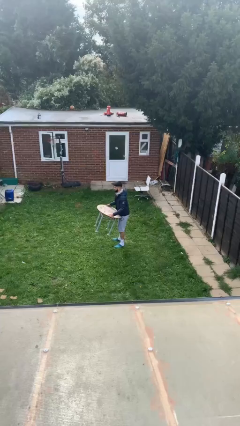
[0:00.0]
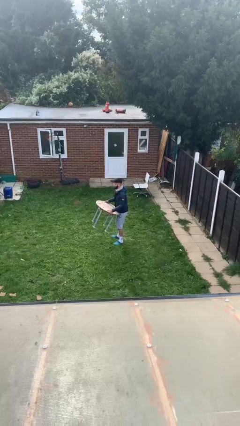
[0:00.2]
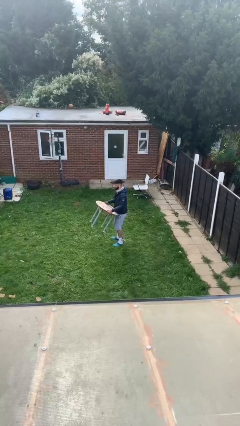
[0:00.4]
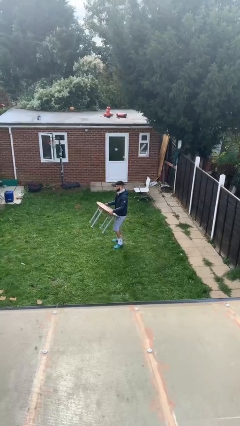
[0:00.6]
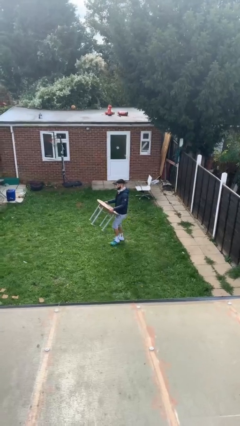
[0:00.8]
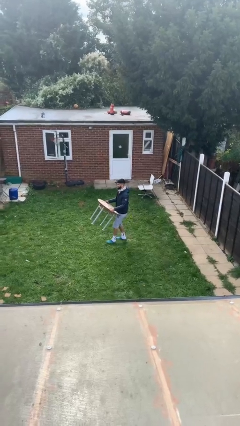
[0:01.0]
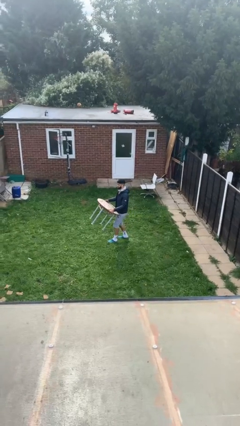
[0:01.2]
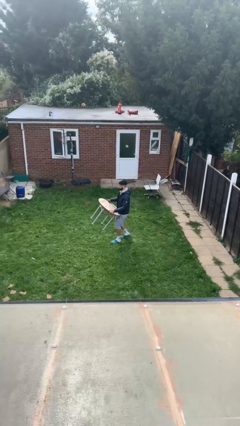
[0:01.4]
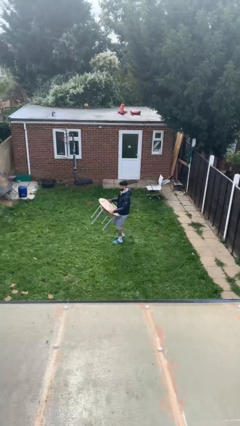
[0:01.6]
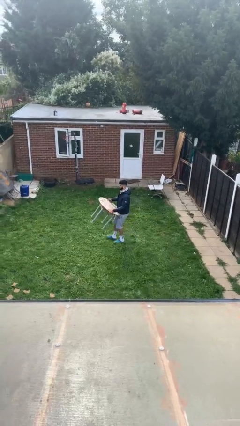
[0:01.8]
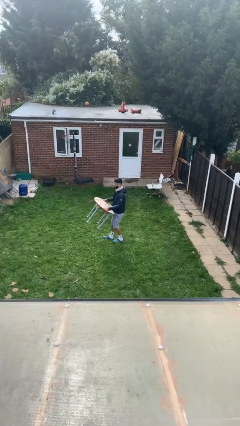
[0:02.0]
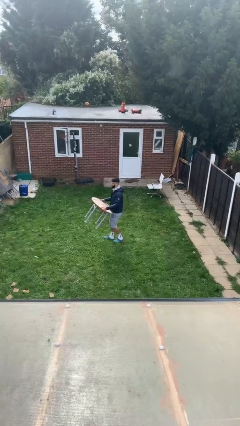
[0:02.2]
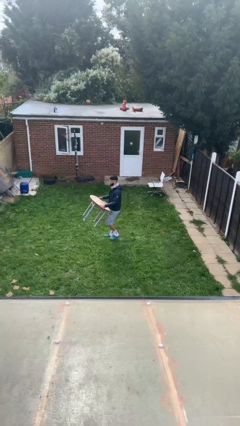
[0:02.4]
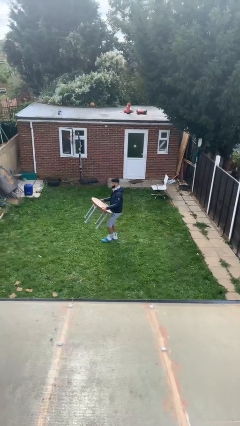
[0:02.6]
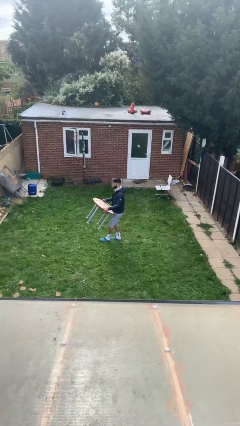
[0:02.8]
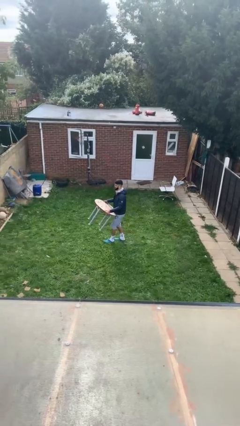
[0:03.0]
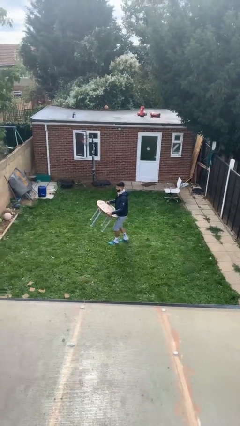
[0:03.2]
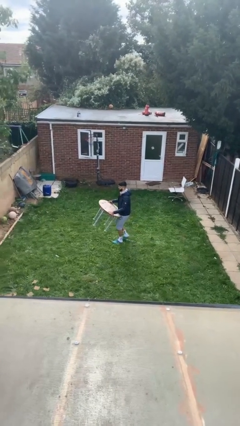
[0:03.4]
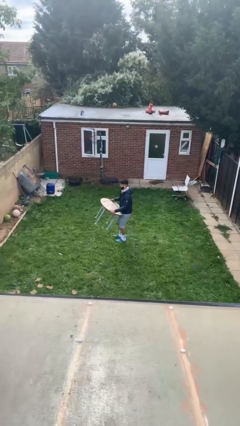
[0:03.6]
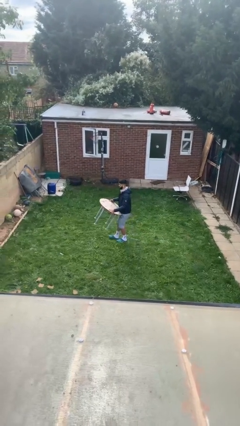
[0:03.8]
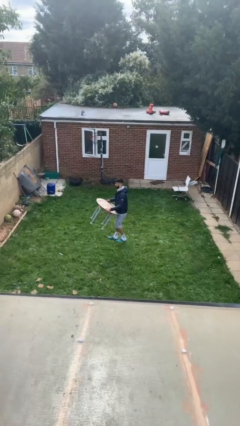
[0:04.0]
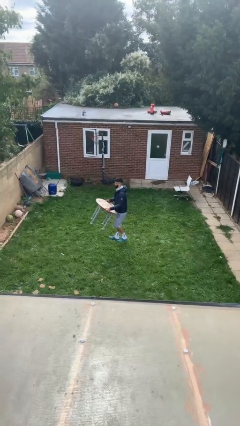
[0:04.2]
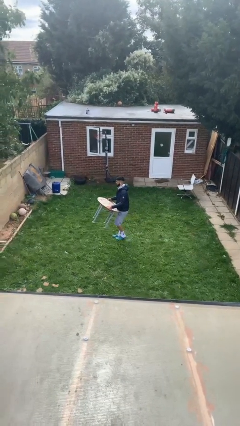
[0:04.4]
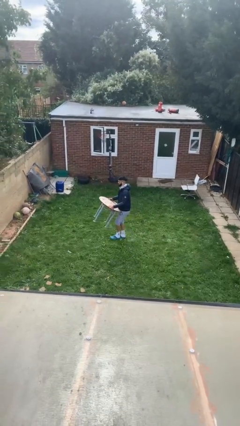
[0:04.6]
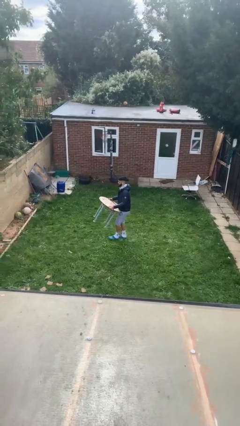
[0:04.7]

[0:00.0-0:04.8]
person carries heavy object

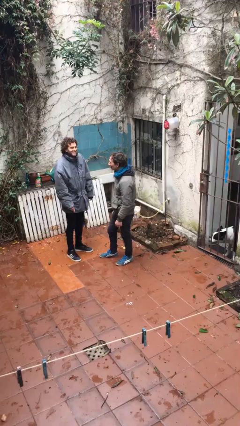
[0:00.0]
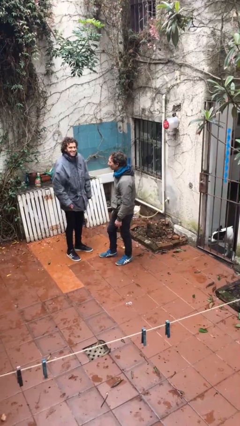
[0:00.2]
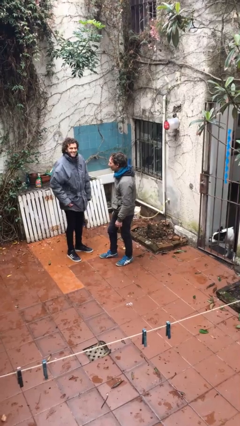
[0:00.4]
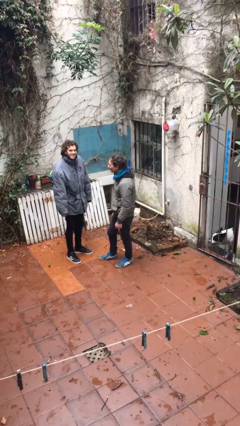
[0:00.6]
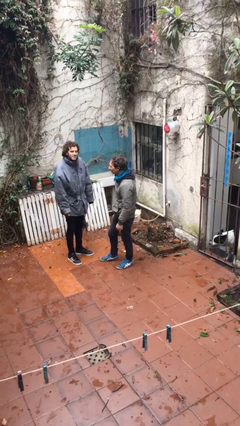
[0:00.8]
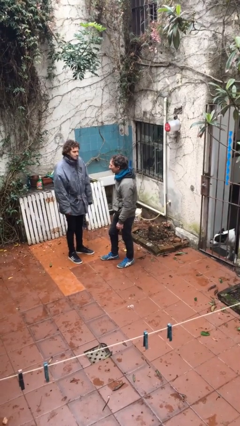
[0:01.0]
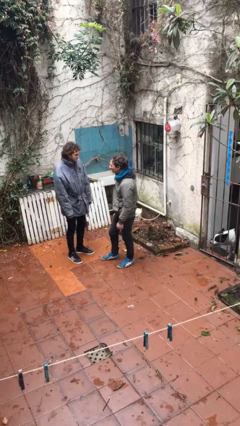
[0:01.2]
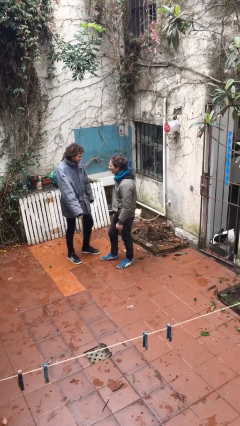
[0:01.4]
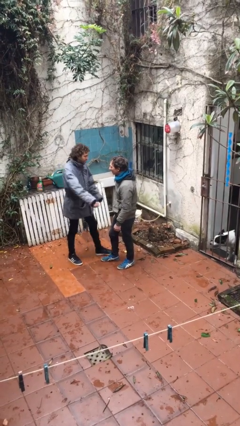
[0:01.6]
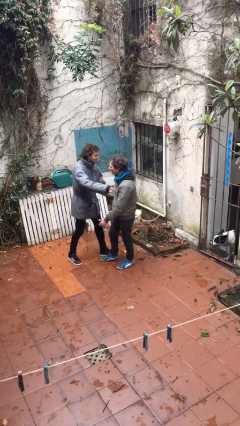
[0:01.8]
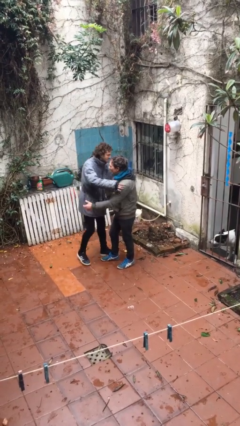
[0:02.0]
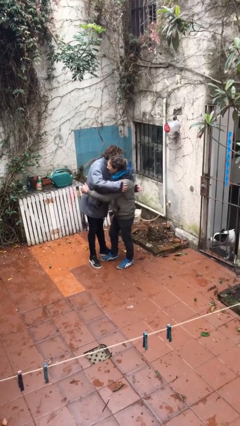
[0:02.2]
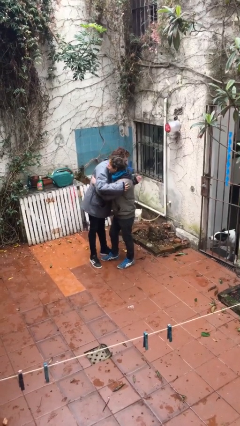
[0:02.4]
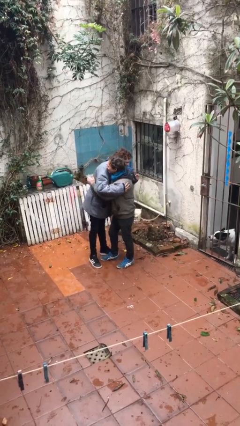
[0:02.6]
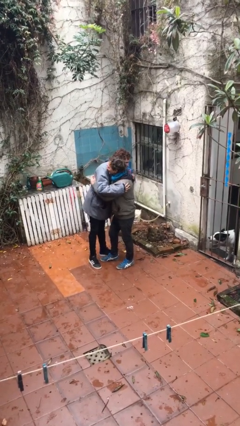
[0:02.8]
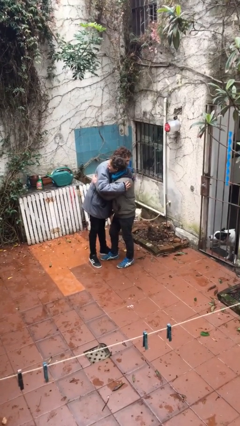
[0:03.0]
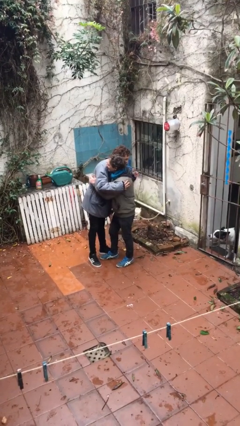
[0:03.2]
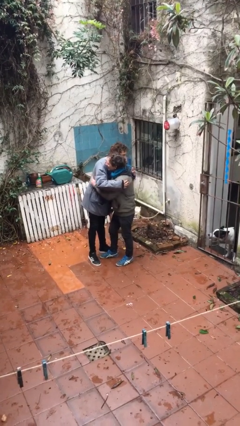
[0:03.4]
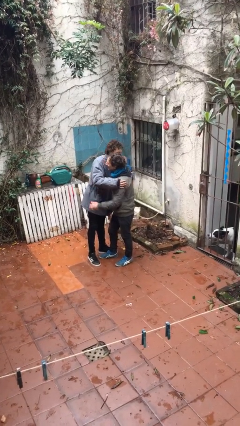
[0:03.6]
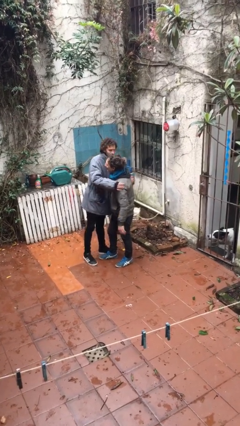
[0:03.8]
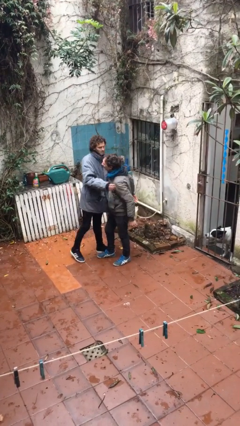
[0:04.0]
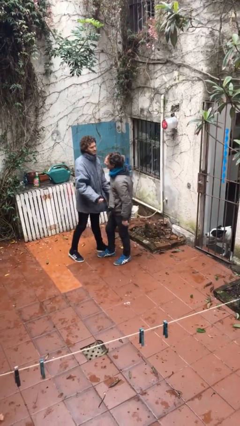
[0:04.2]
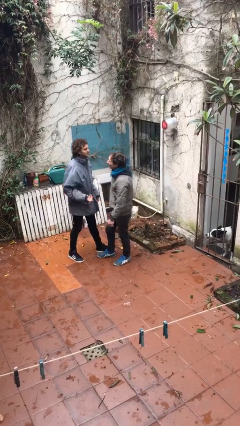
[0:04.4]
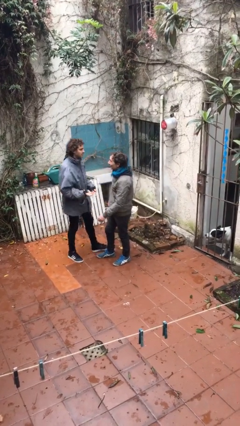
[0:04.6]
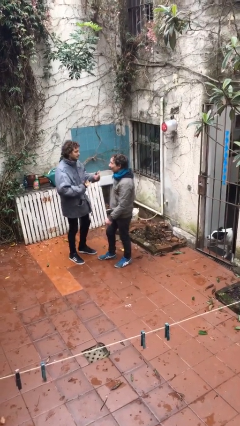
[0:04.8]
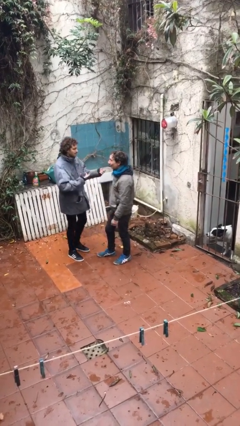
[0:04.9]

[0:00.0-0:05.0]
person embraces person

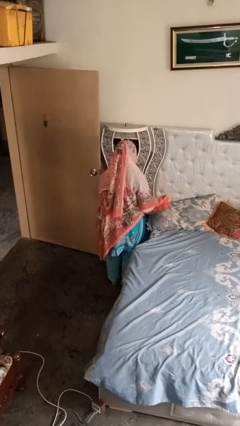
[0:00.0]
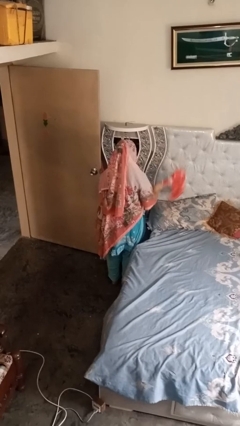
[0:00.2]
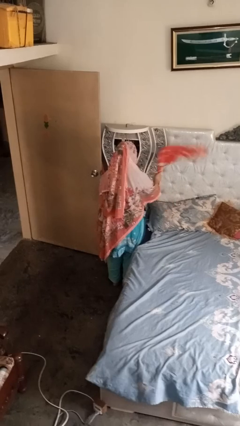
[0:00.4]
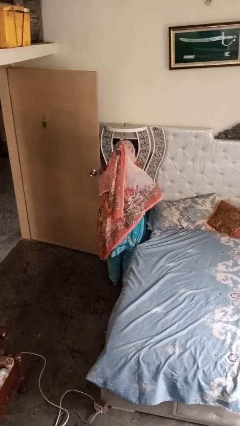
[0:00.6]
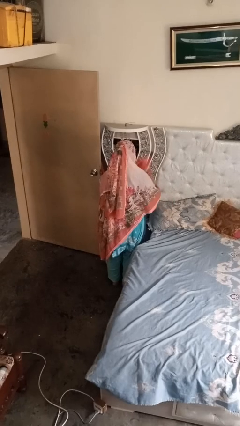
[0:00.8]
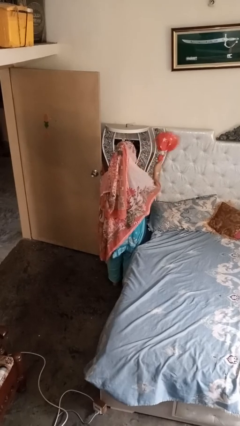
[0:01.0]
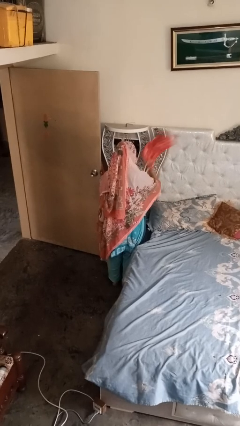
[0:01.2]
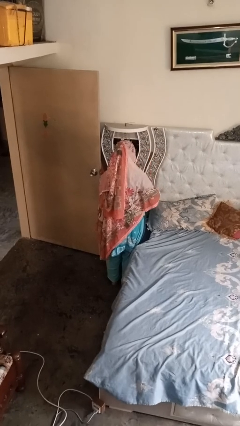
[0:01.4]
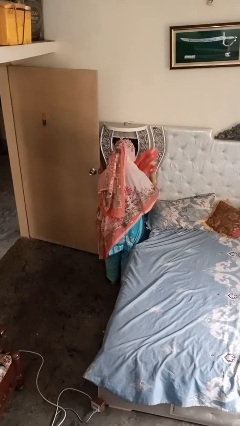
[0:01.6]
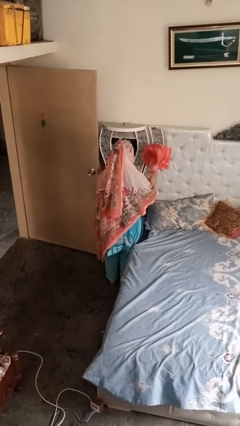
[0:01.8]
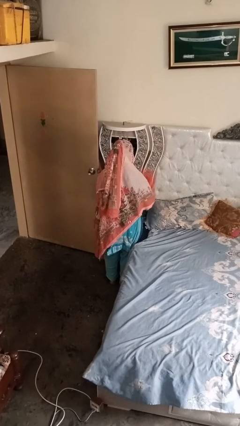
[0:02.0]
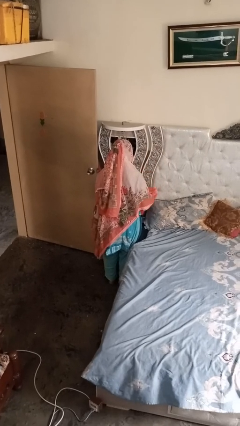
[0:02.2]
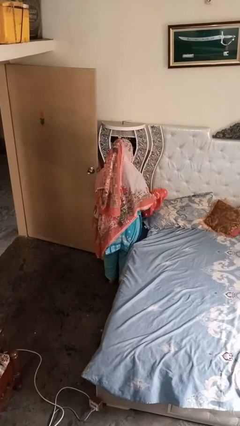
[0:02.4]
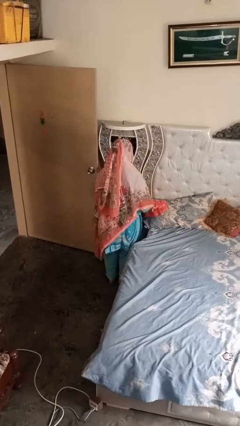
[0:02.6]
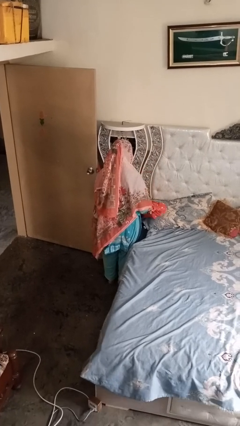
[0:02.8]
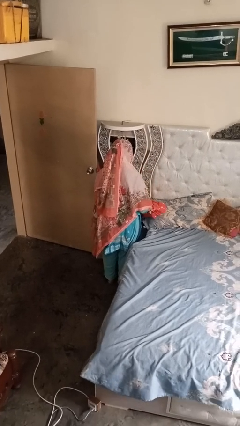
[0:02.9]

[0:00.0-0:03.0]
person dusts furniture

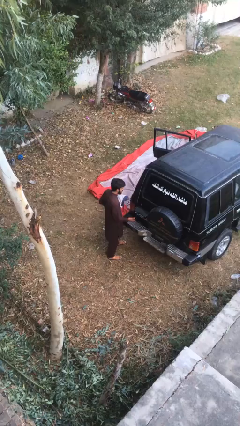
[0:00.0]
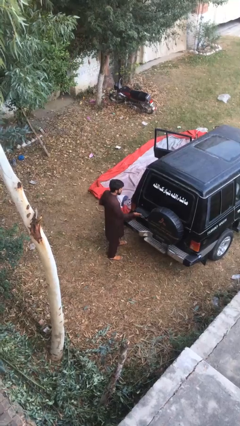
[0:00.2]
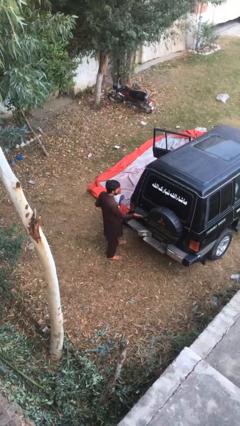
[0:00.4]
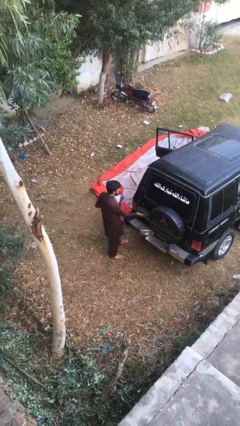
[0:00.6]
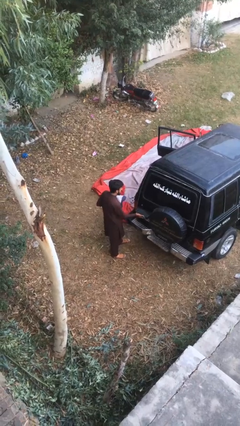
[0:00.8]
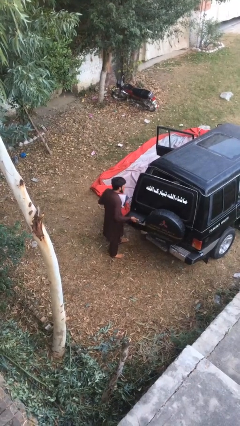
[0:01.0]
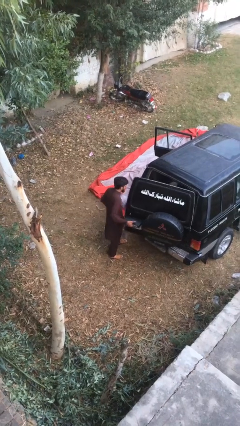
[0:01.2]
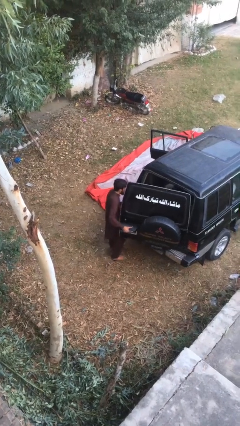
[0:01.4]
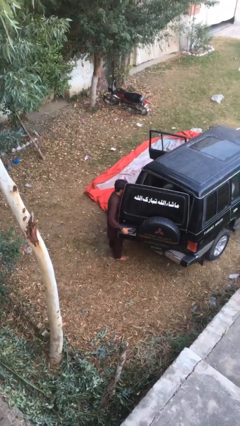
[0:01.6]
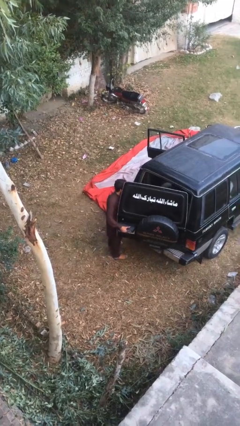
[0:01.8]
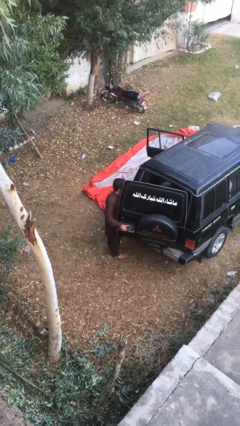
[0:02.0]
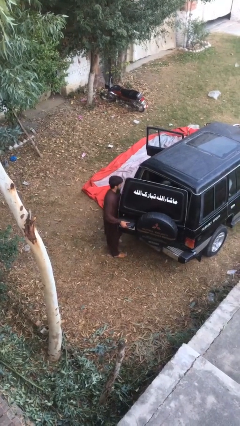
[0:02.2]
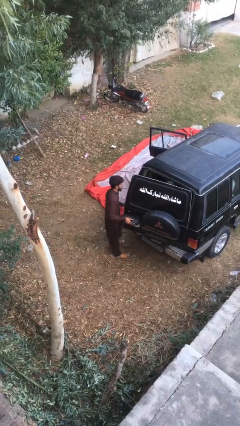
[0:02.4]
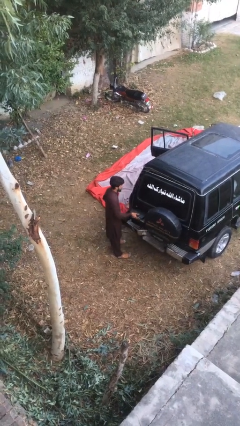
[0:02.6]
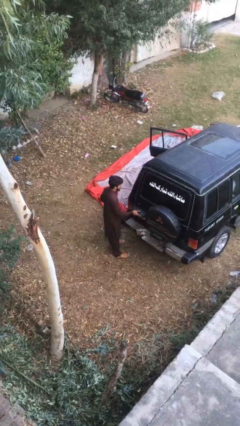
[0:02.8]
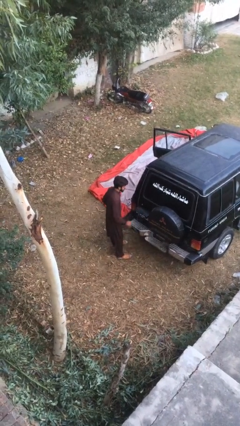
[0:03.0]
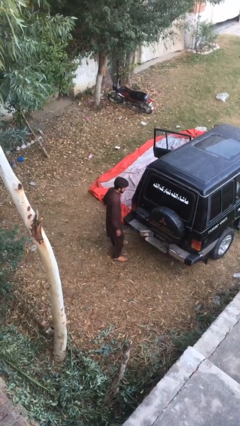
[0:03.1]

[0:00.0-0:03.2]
person loads car

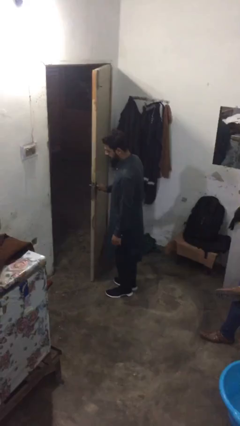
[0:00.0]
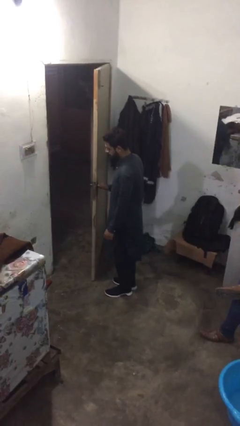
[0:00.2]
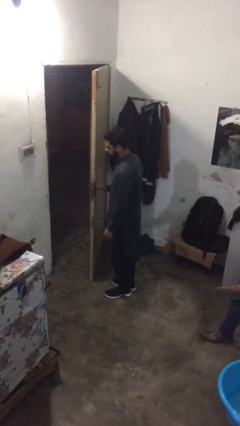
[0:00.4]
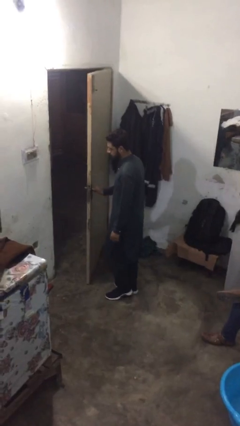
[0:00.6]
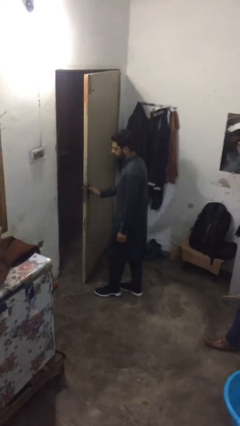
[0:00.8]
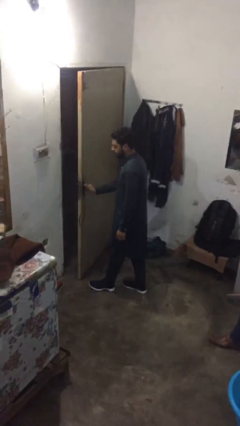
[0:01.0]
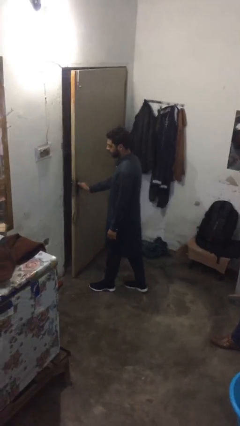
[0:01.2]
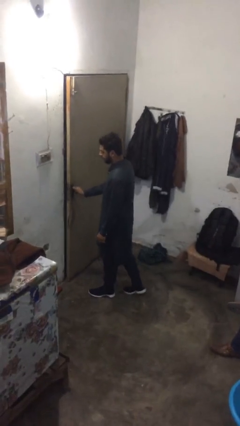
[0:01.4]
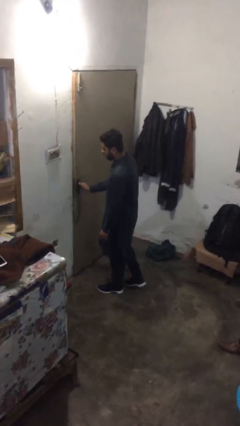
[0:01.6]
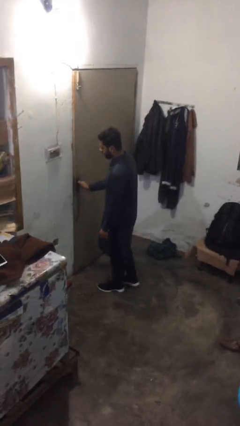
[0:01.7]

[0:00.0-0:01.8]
person closes facility door
